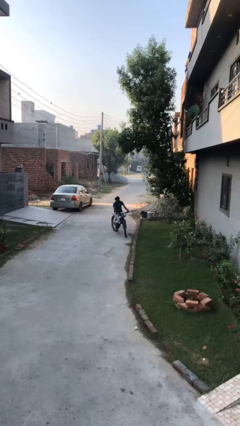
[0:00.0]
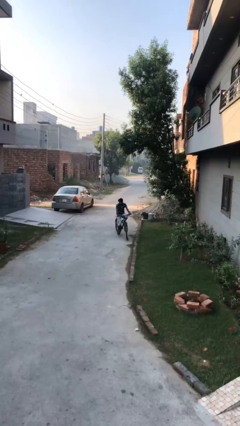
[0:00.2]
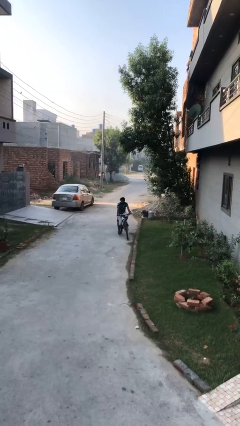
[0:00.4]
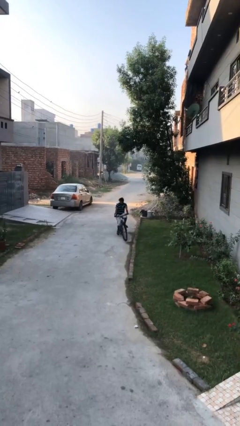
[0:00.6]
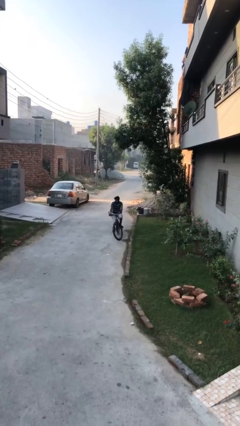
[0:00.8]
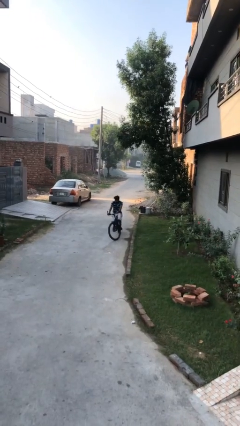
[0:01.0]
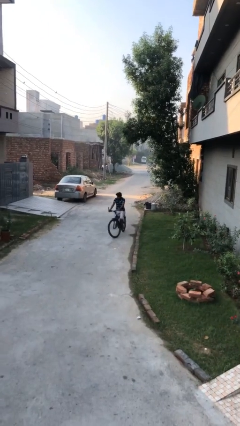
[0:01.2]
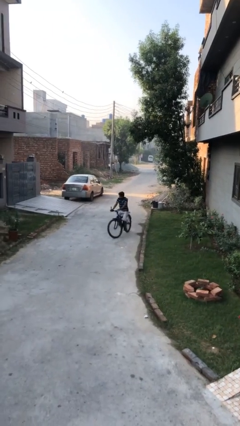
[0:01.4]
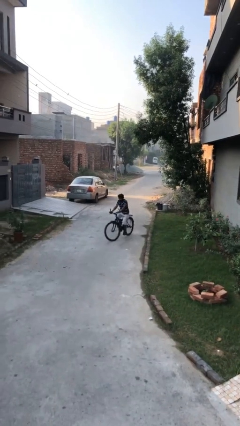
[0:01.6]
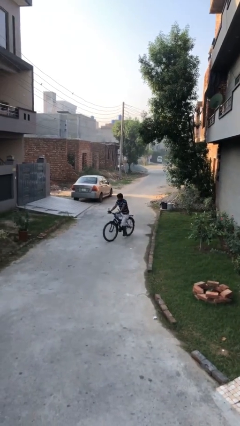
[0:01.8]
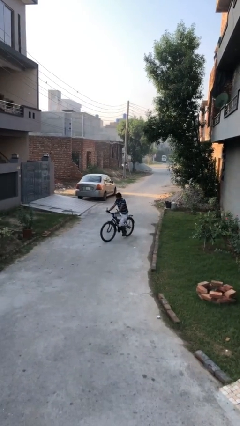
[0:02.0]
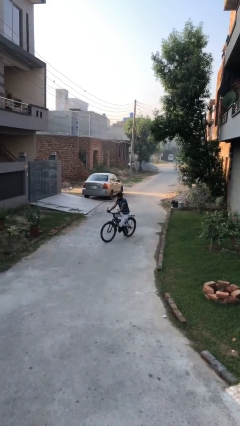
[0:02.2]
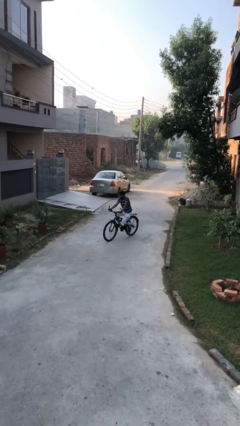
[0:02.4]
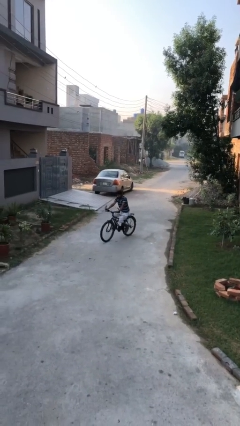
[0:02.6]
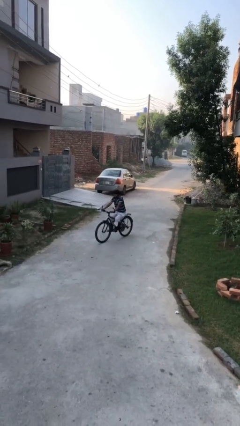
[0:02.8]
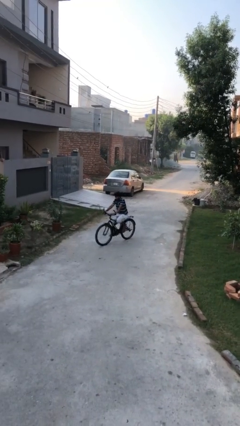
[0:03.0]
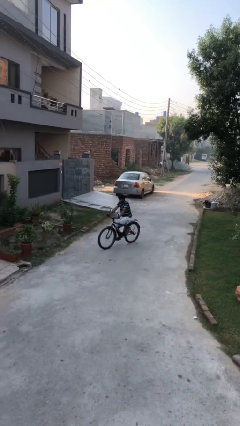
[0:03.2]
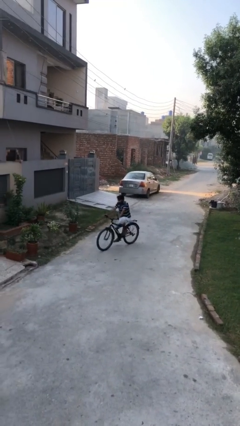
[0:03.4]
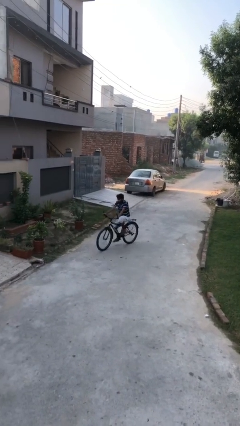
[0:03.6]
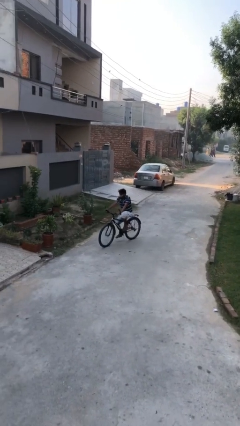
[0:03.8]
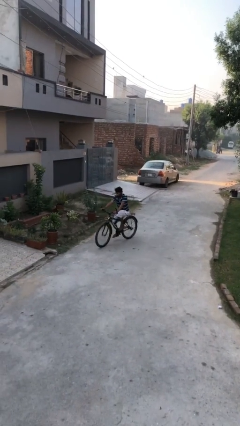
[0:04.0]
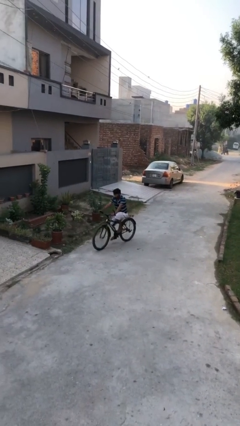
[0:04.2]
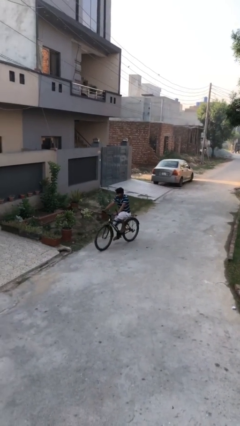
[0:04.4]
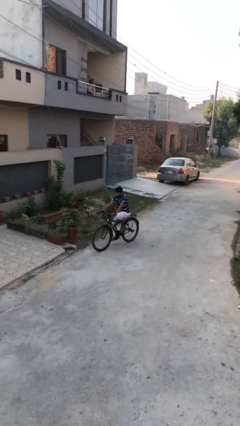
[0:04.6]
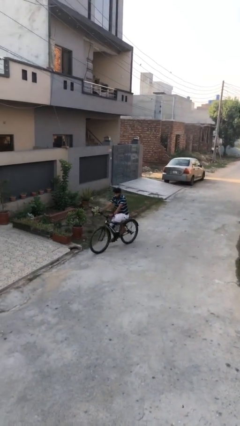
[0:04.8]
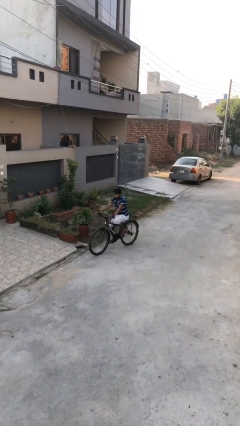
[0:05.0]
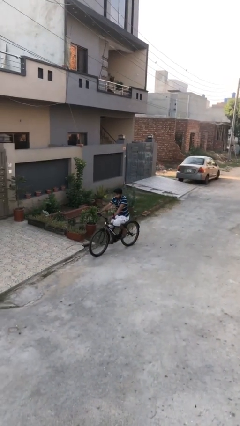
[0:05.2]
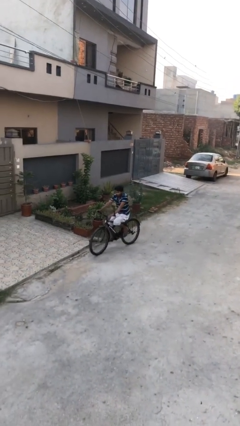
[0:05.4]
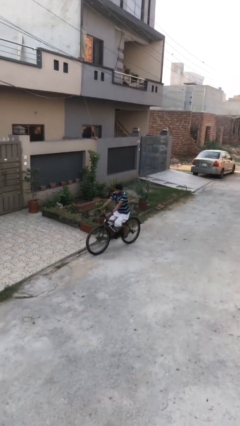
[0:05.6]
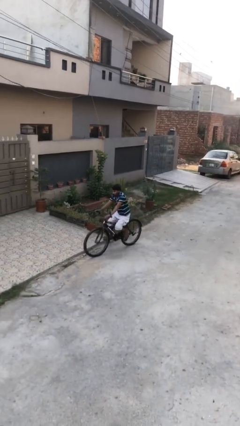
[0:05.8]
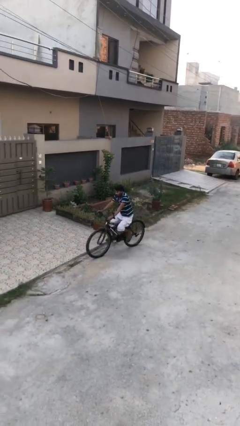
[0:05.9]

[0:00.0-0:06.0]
person rides bicycle

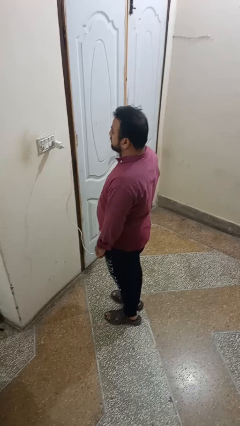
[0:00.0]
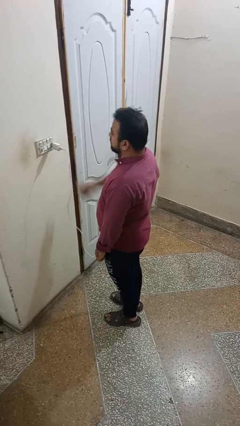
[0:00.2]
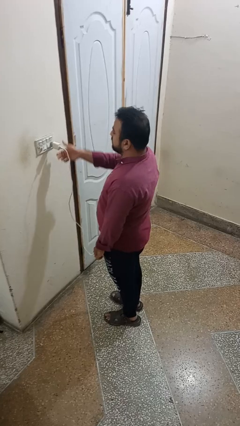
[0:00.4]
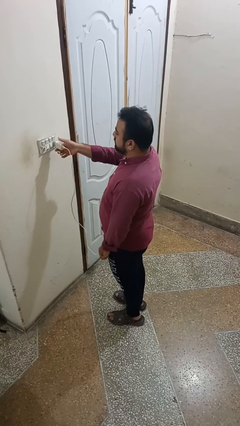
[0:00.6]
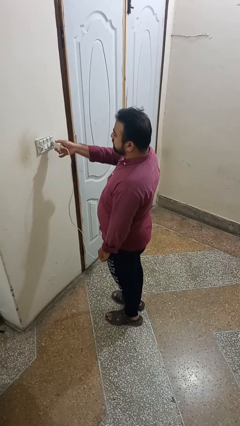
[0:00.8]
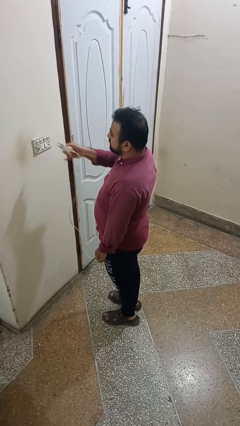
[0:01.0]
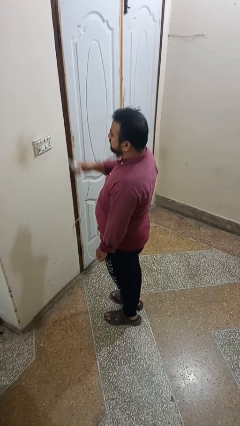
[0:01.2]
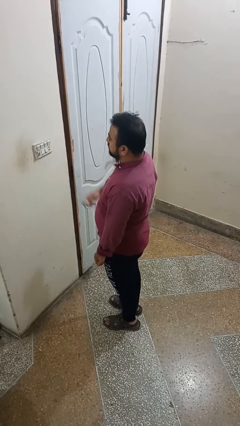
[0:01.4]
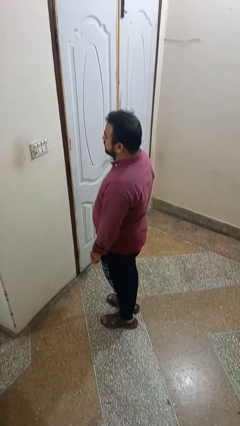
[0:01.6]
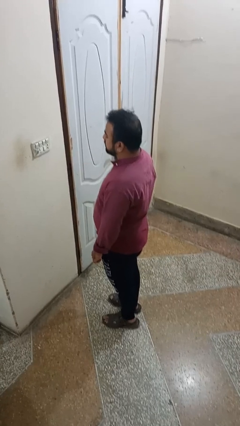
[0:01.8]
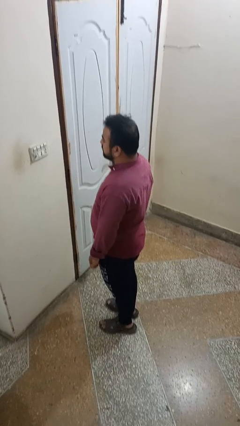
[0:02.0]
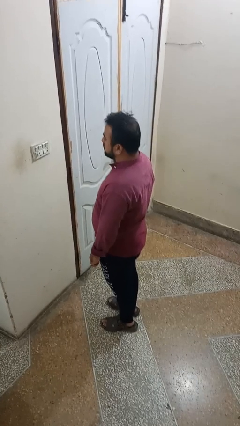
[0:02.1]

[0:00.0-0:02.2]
person unplugs from electrical socket

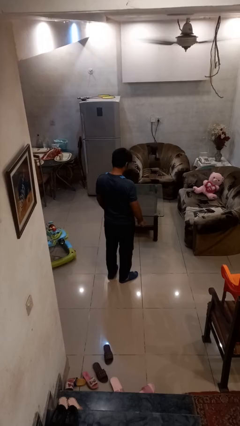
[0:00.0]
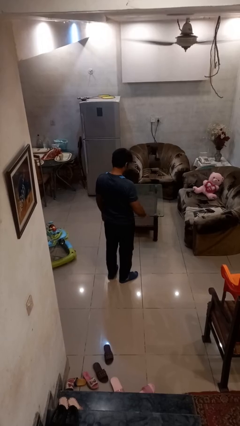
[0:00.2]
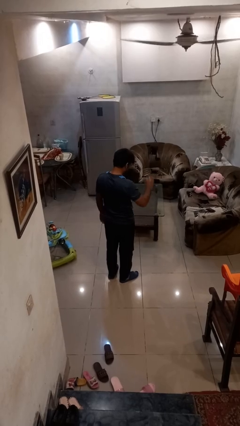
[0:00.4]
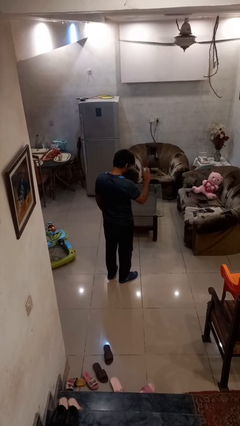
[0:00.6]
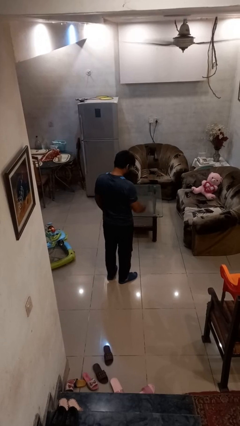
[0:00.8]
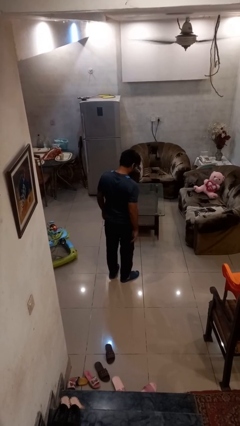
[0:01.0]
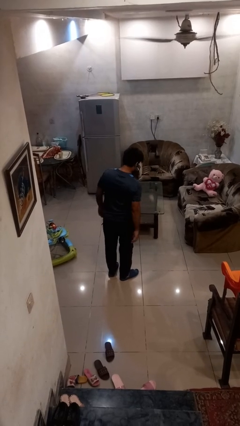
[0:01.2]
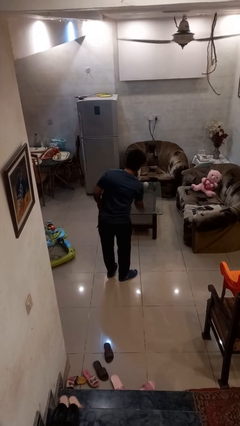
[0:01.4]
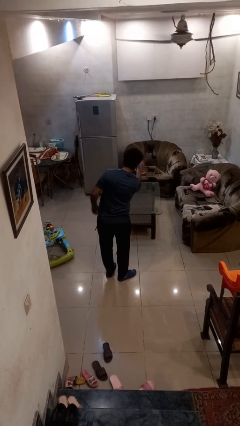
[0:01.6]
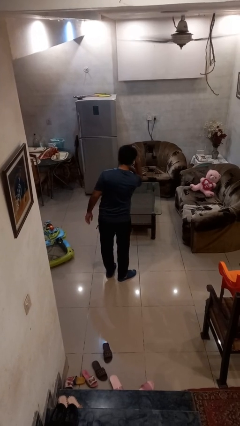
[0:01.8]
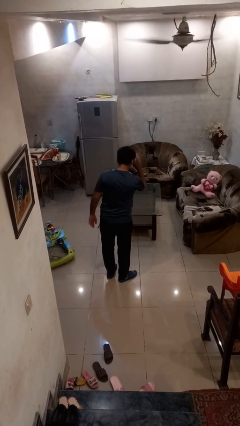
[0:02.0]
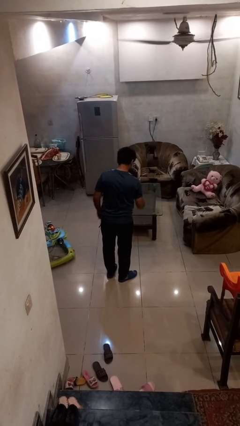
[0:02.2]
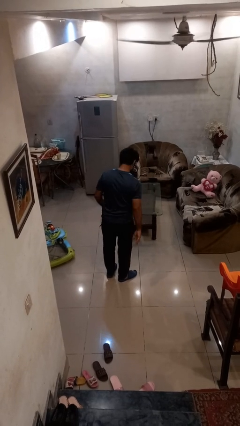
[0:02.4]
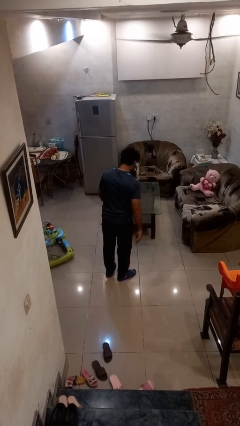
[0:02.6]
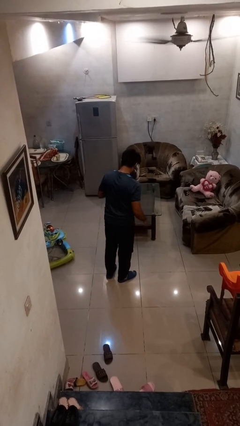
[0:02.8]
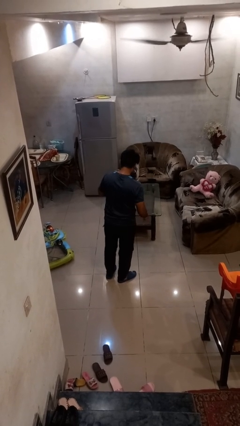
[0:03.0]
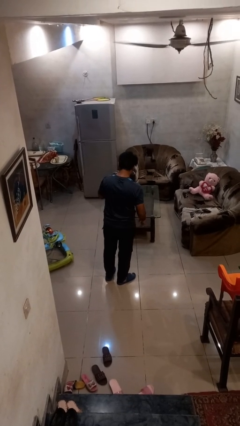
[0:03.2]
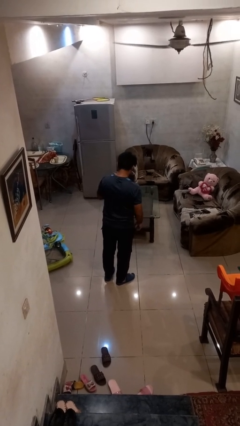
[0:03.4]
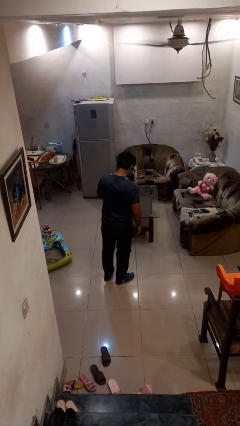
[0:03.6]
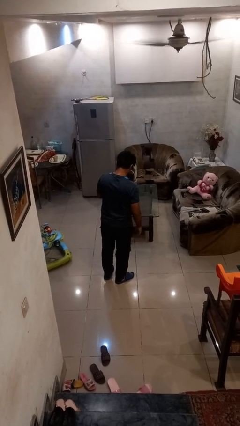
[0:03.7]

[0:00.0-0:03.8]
person bounces ball on floor

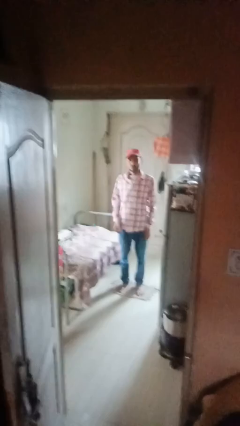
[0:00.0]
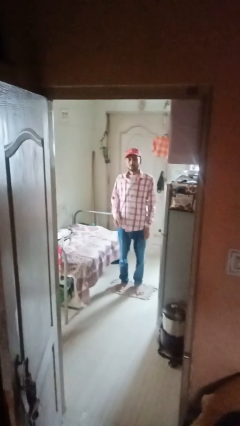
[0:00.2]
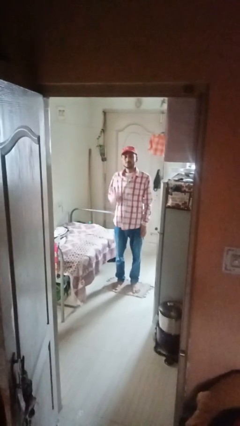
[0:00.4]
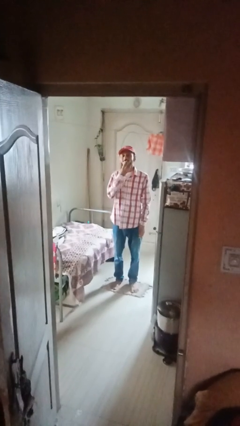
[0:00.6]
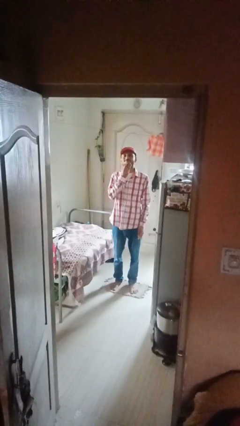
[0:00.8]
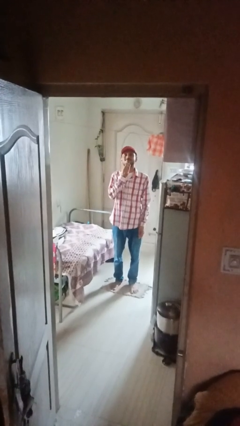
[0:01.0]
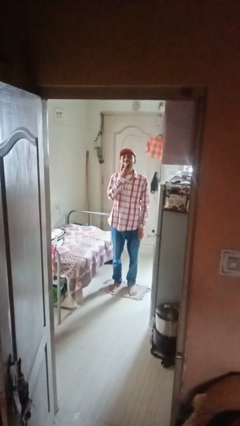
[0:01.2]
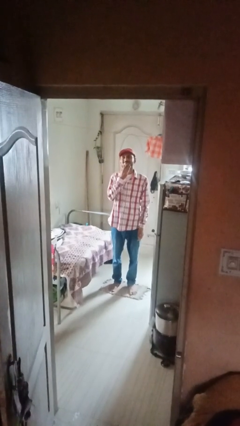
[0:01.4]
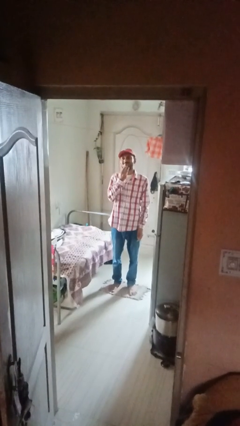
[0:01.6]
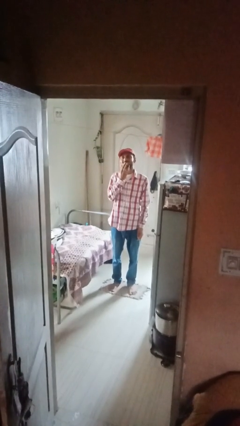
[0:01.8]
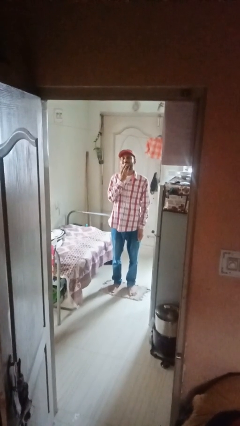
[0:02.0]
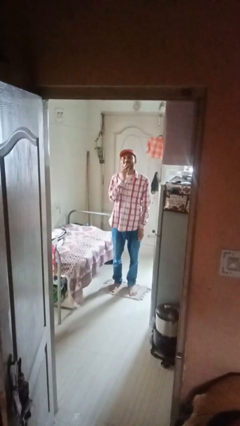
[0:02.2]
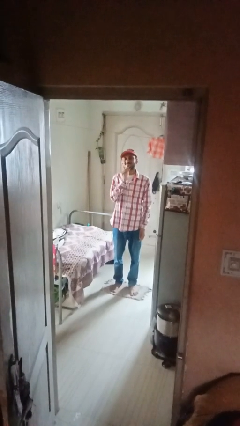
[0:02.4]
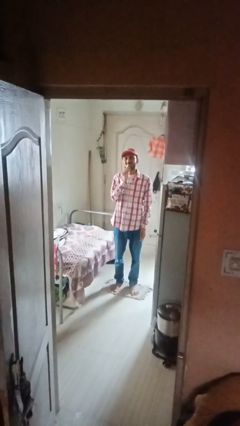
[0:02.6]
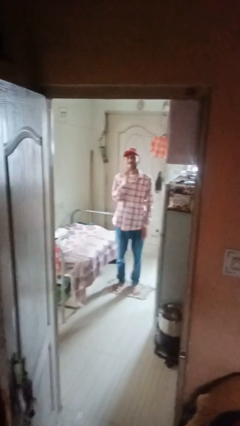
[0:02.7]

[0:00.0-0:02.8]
person strokes chin

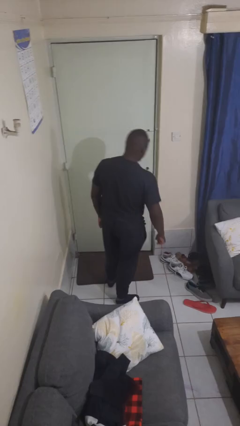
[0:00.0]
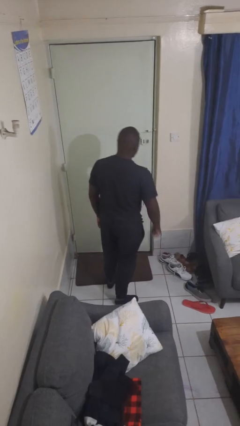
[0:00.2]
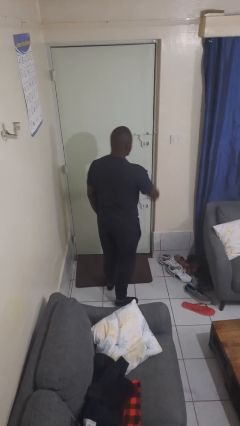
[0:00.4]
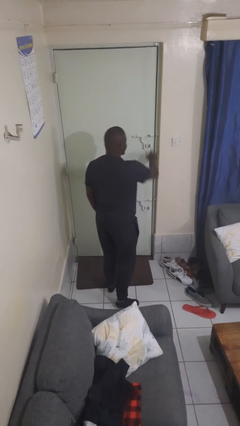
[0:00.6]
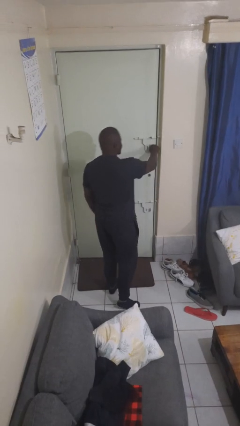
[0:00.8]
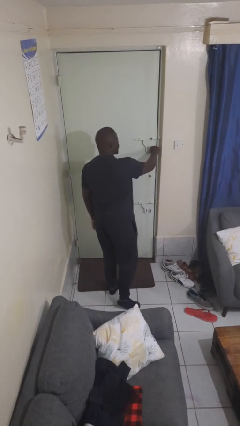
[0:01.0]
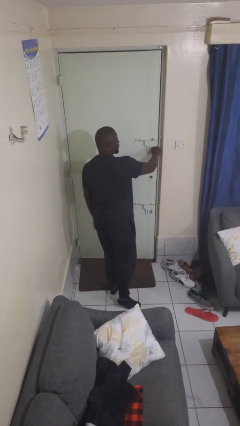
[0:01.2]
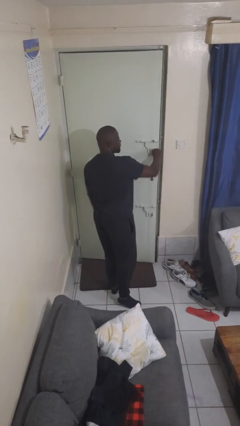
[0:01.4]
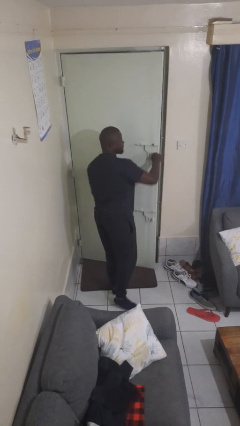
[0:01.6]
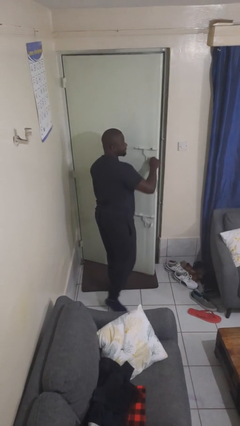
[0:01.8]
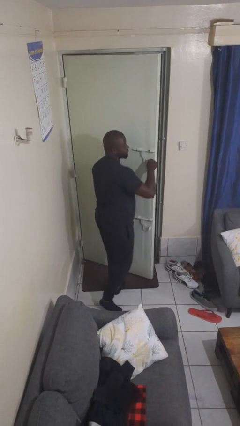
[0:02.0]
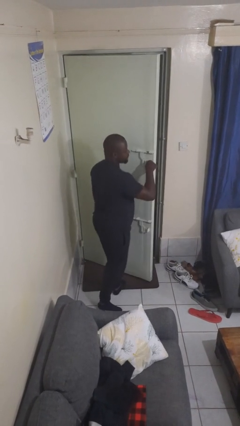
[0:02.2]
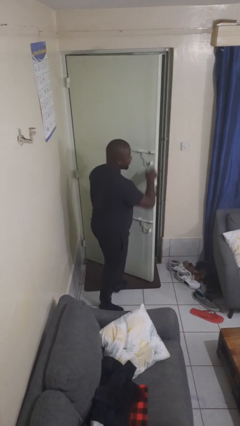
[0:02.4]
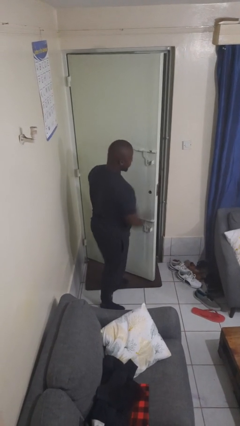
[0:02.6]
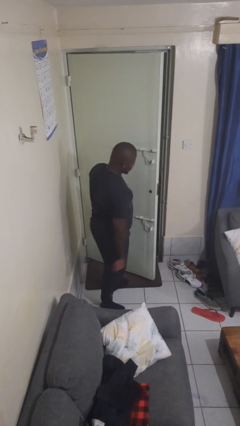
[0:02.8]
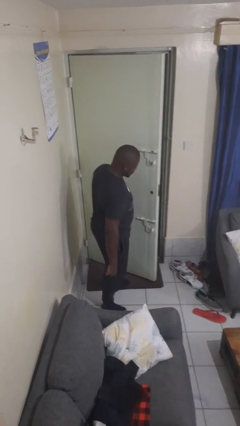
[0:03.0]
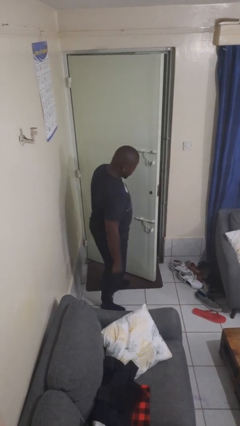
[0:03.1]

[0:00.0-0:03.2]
person opens facility door
